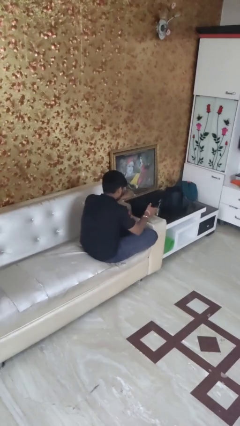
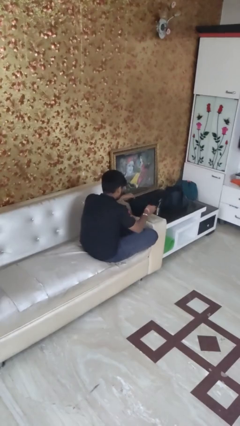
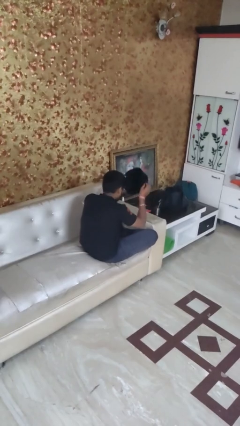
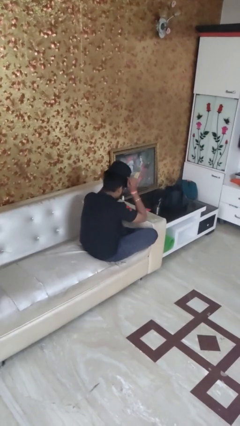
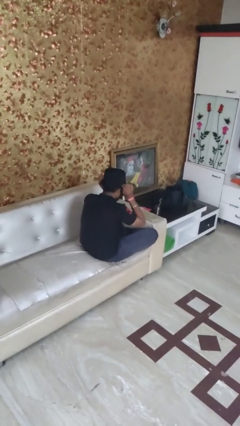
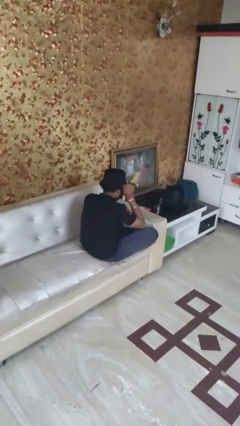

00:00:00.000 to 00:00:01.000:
person puts on hat

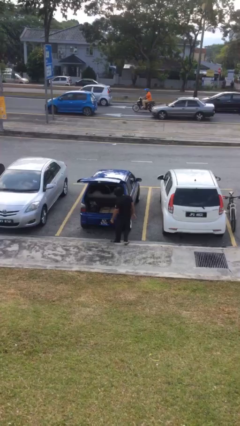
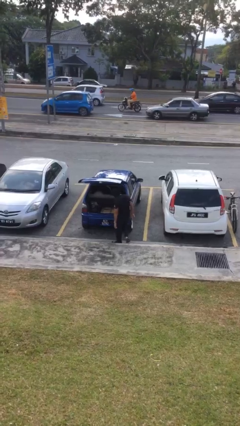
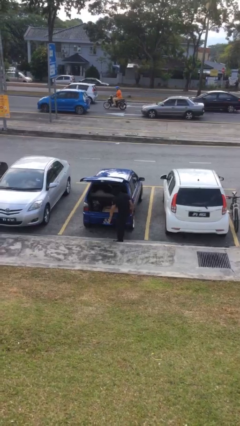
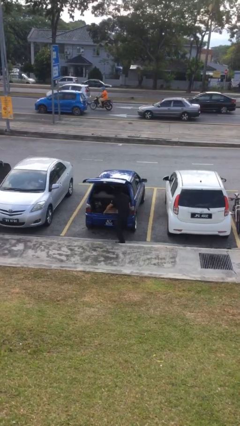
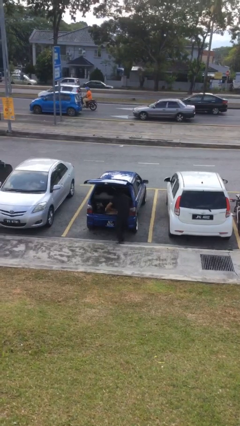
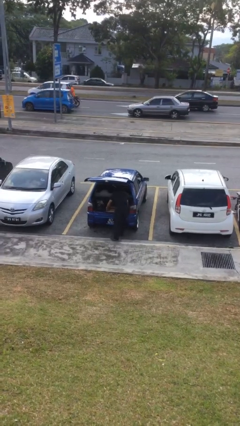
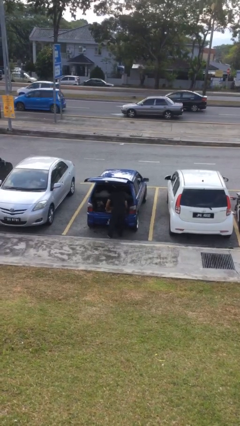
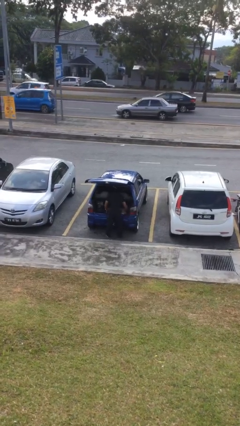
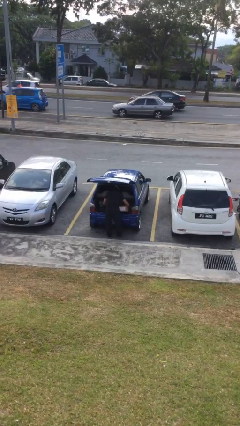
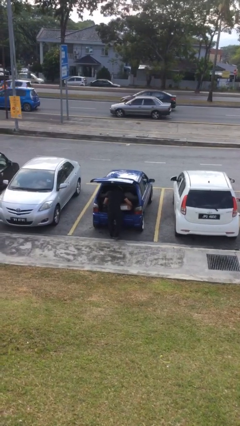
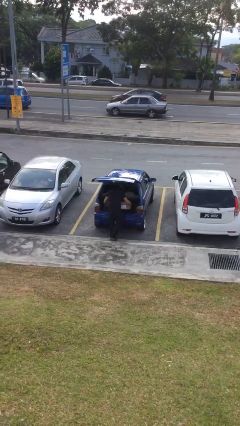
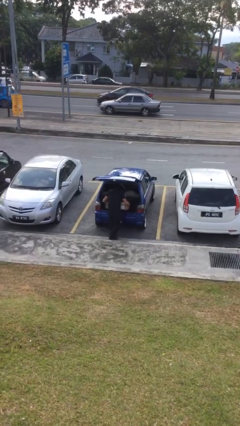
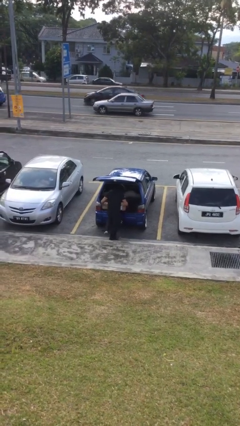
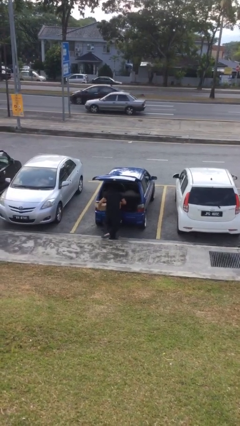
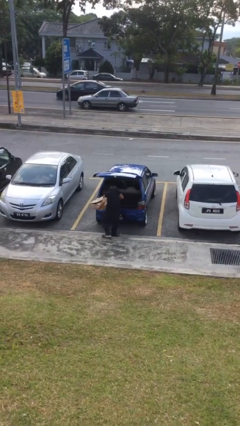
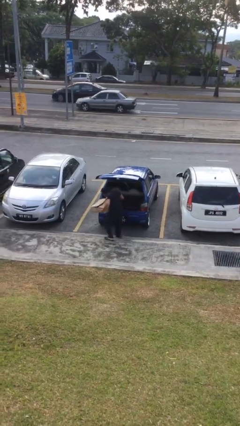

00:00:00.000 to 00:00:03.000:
person unloads car

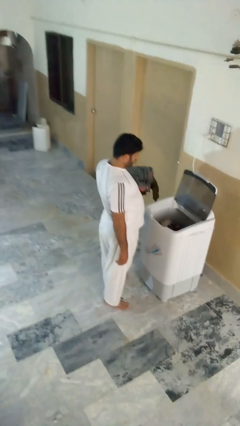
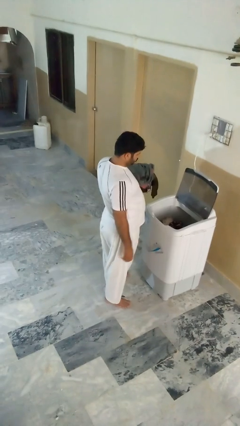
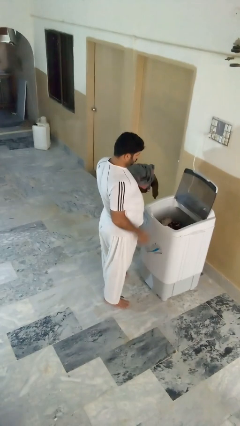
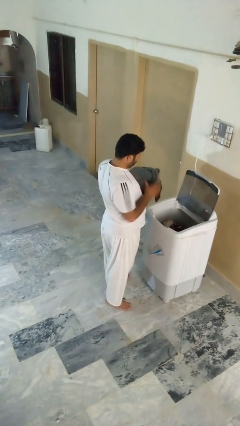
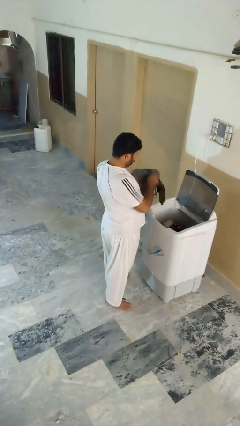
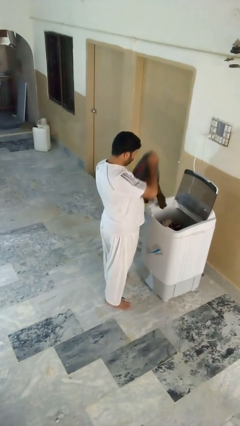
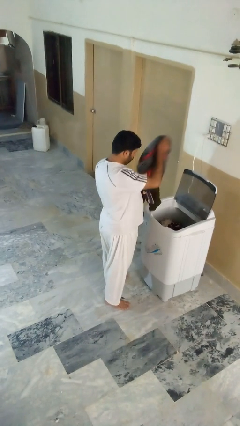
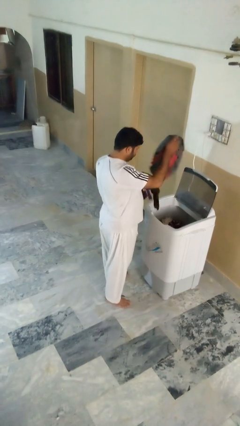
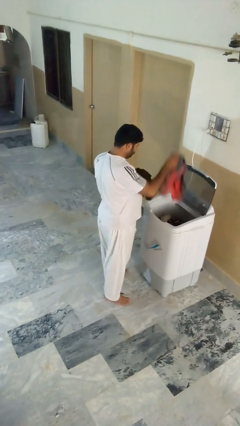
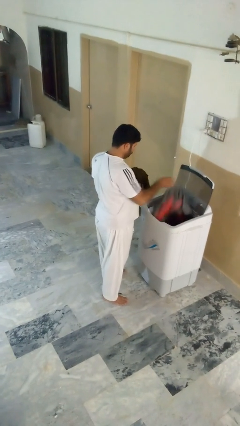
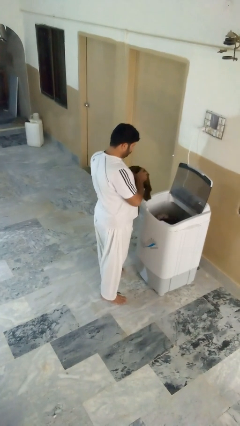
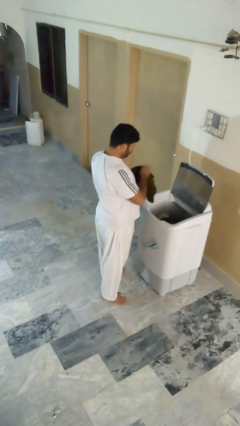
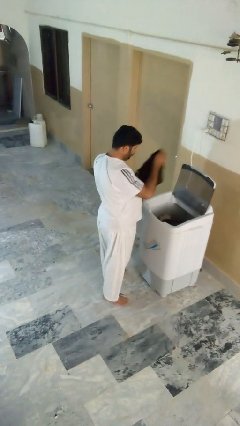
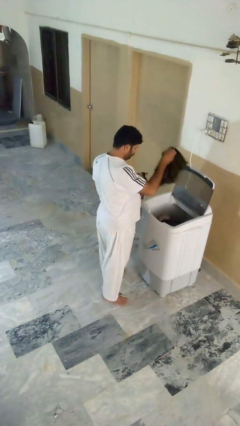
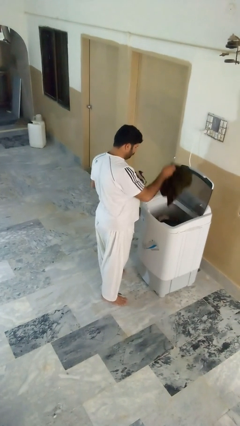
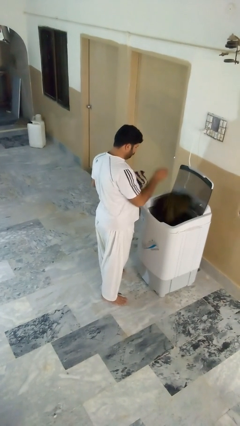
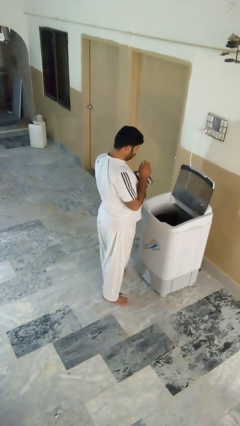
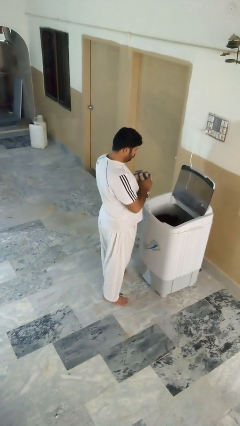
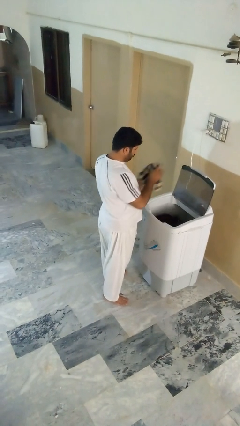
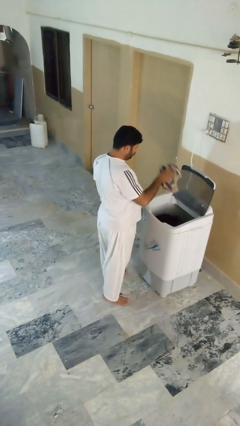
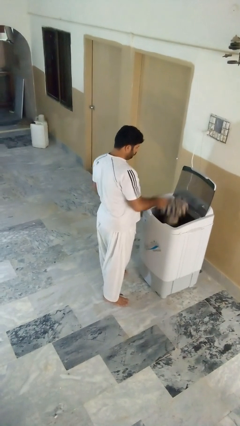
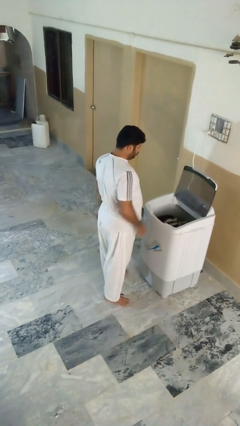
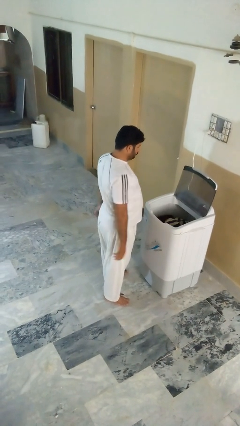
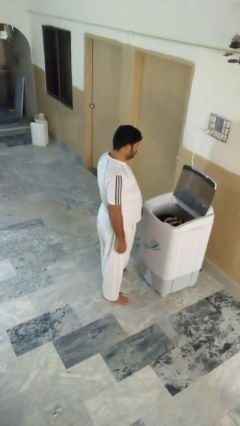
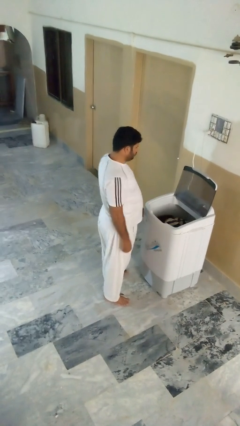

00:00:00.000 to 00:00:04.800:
person loads clotheswasher

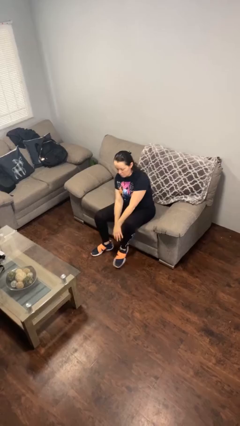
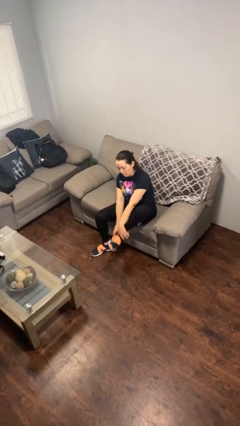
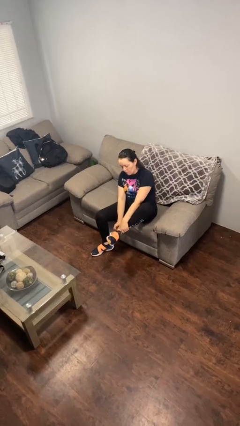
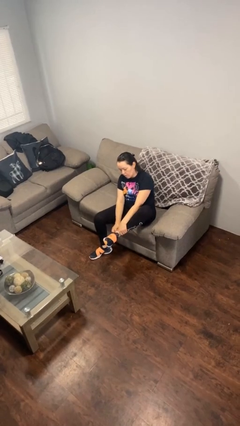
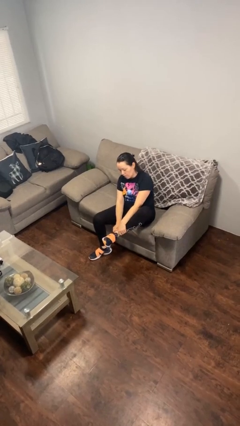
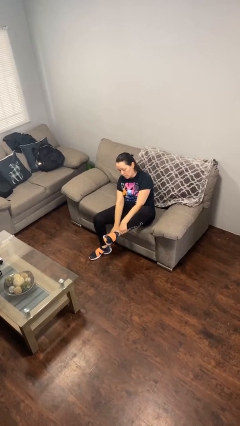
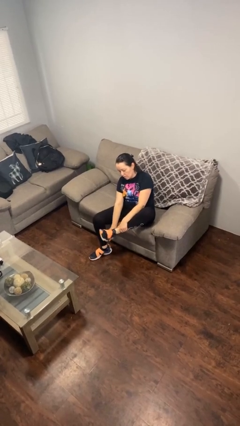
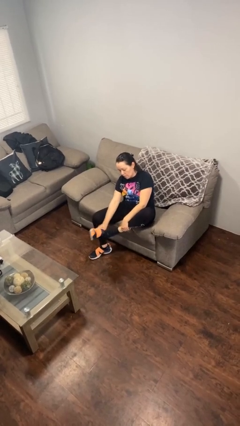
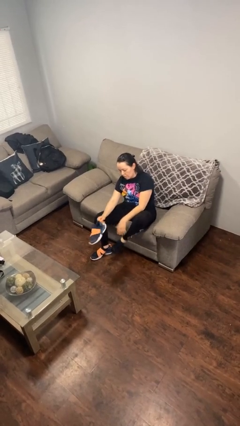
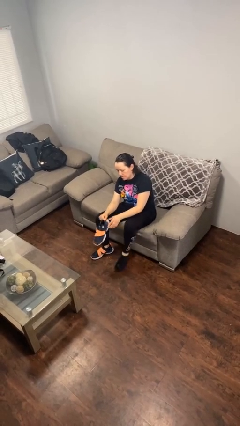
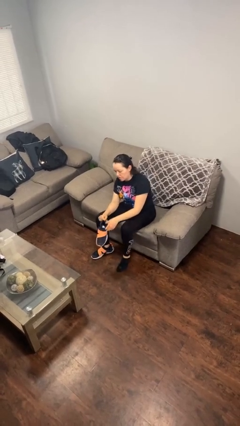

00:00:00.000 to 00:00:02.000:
person takes off shoes

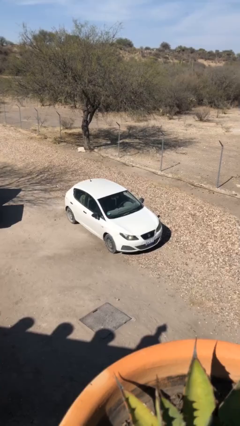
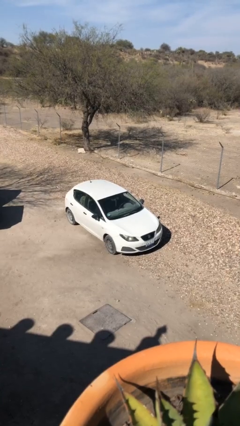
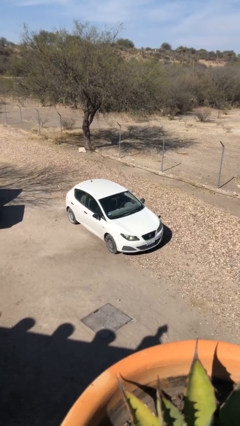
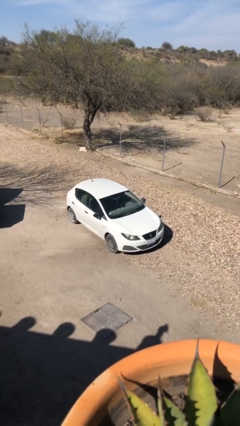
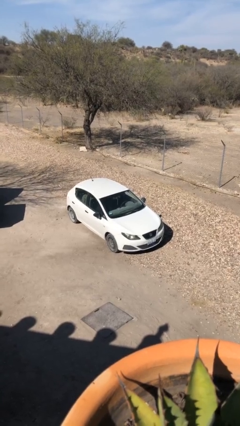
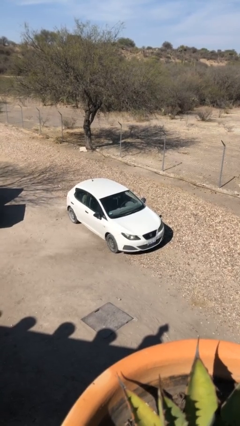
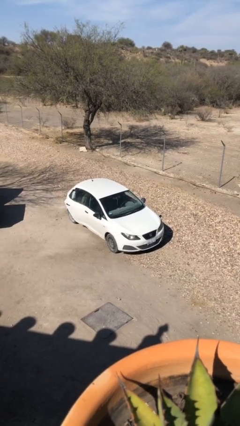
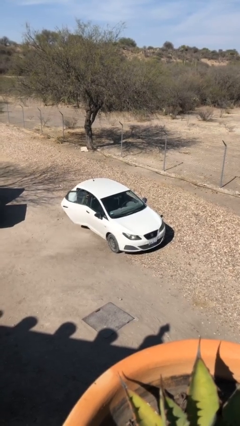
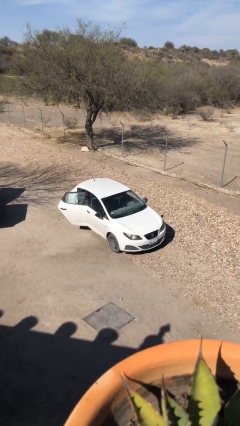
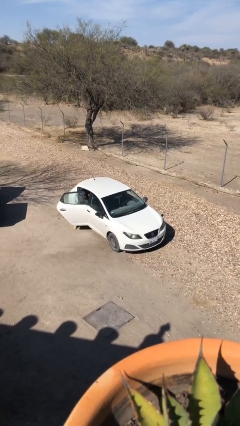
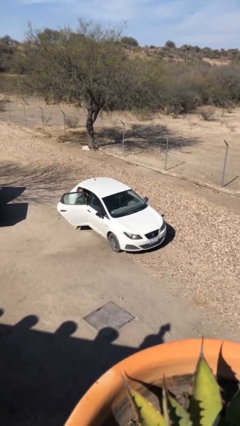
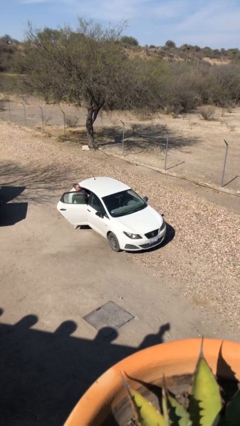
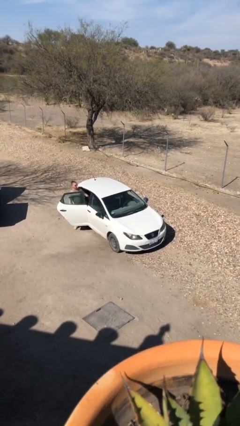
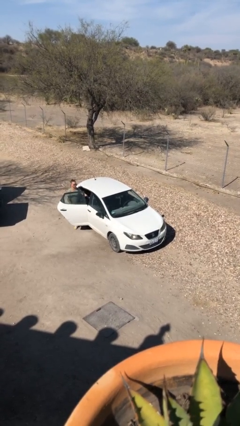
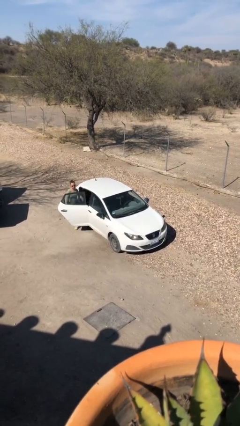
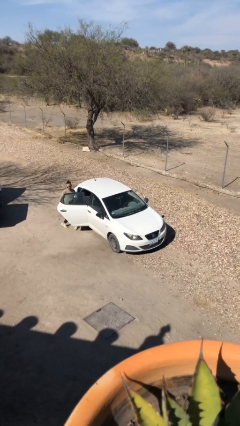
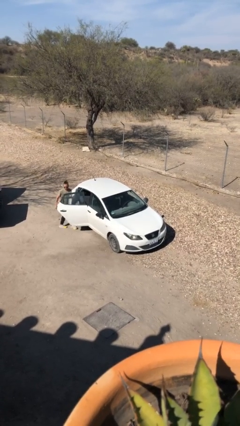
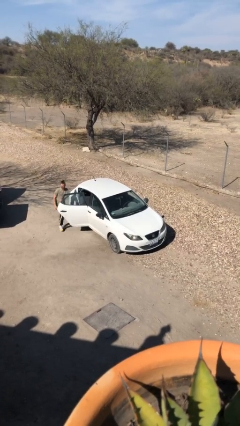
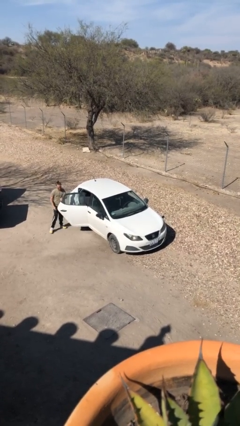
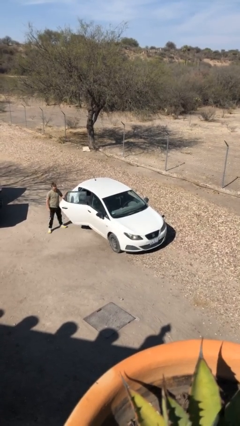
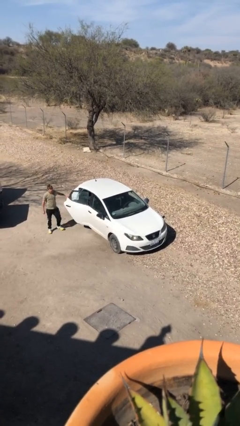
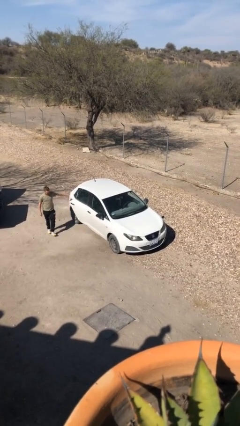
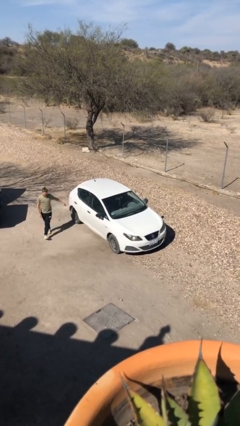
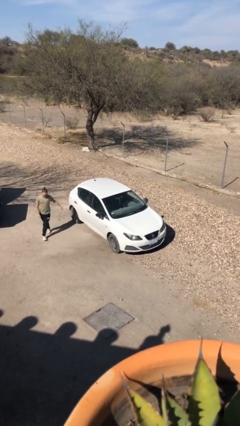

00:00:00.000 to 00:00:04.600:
car drops off person

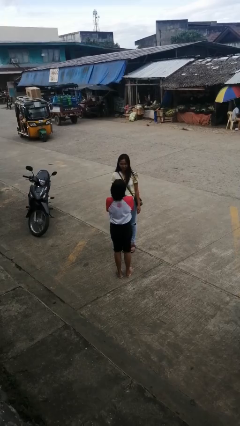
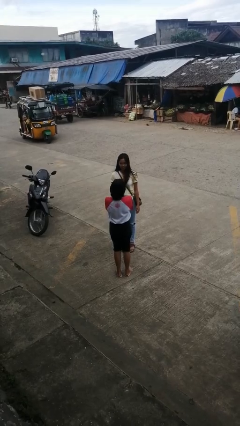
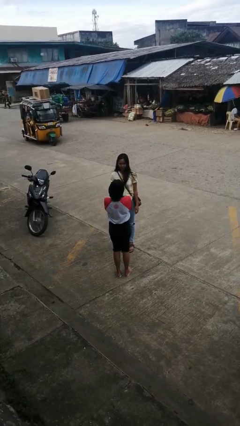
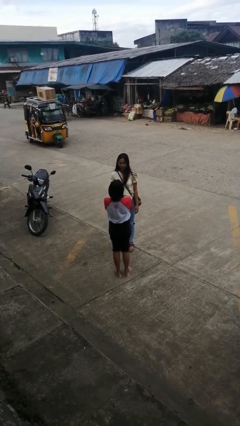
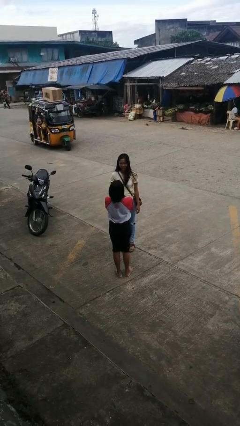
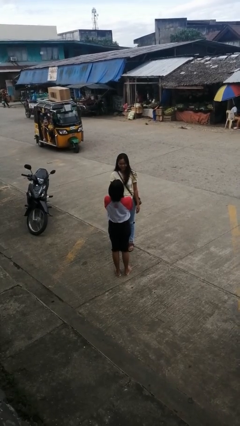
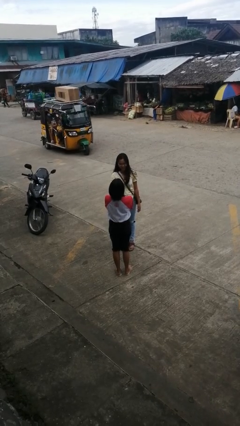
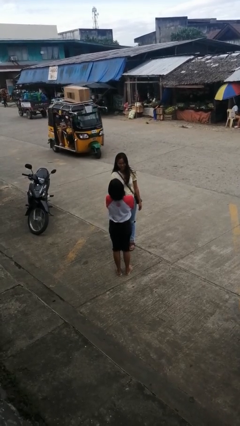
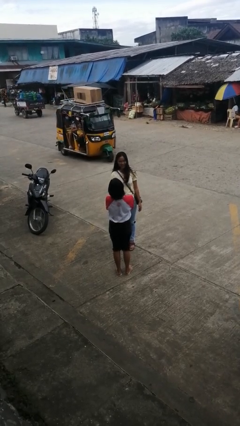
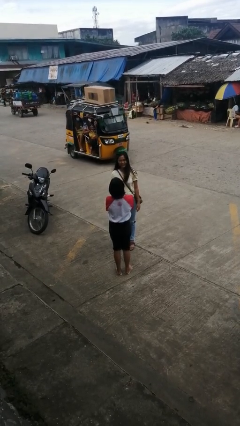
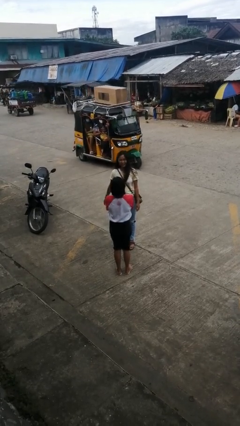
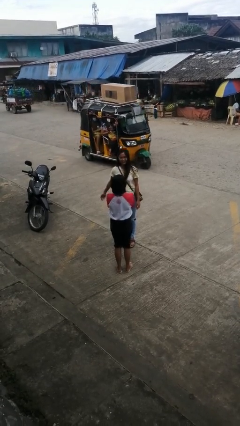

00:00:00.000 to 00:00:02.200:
person laughs with person
